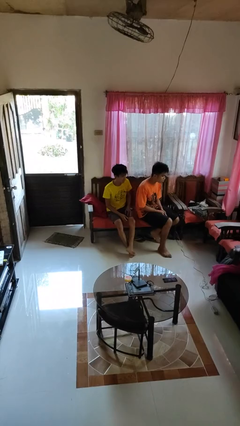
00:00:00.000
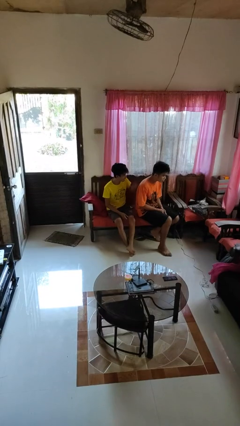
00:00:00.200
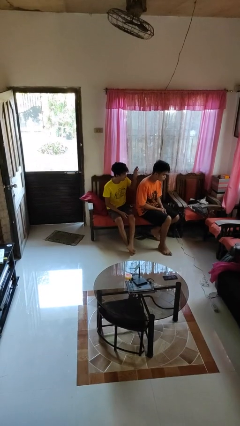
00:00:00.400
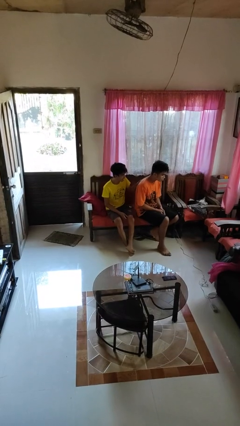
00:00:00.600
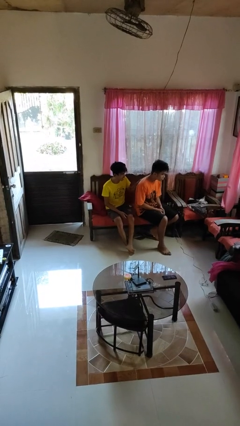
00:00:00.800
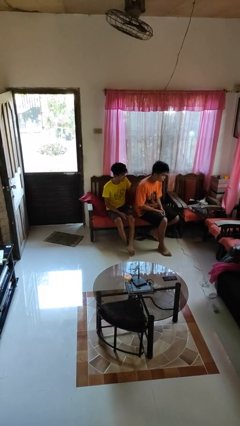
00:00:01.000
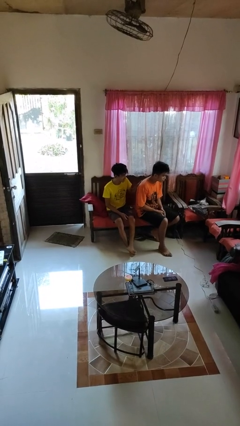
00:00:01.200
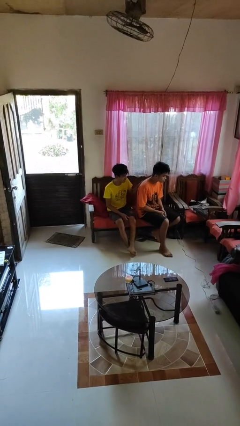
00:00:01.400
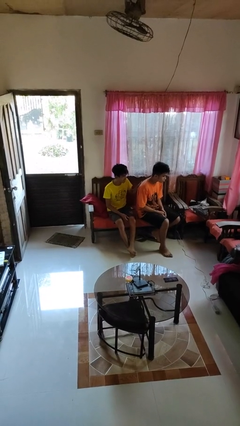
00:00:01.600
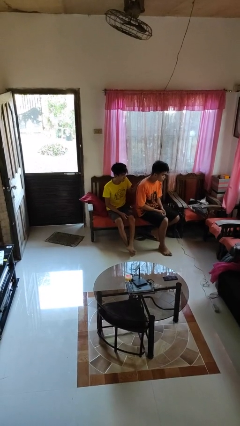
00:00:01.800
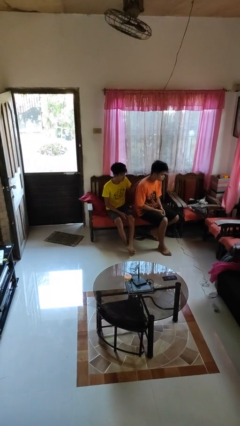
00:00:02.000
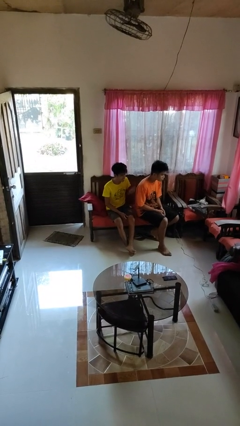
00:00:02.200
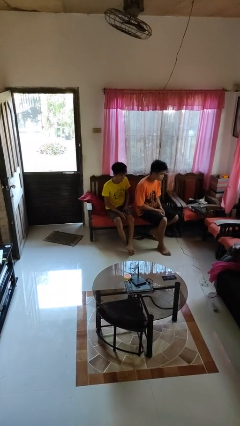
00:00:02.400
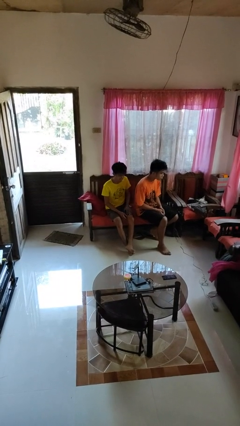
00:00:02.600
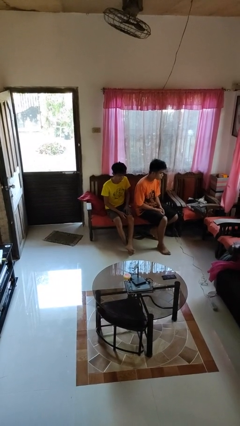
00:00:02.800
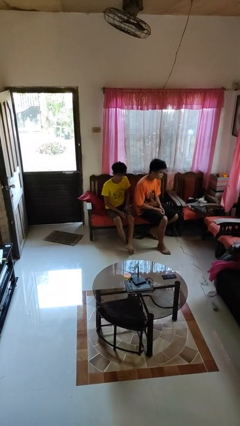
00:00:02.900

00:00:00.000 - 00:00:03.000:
person touches back of person

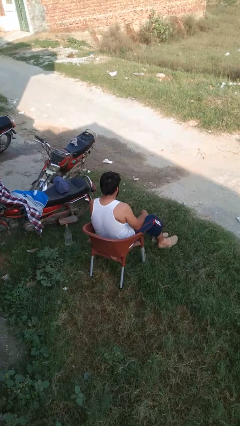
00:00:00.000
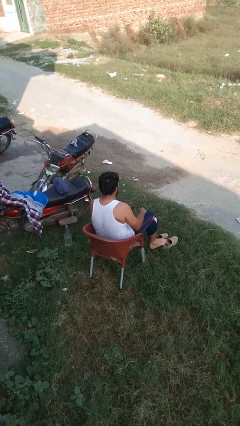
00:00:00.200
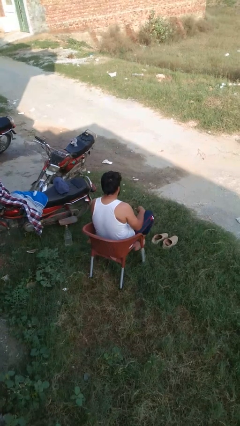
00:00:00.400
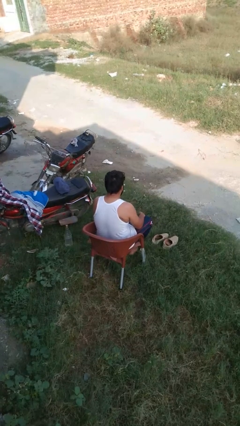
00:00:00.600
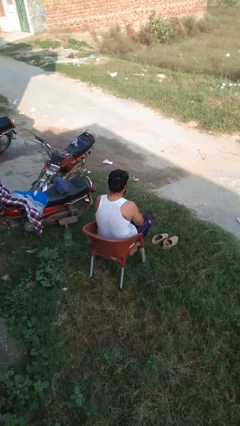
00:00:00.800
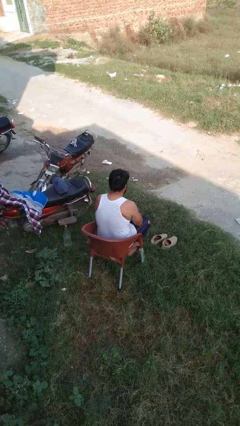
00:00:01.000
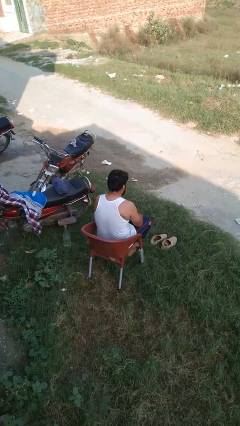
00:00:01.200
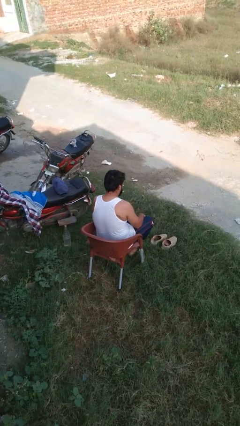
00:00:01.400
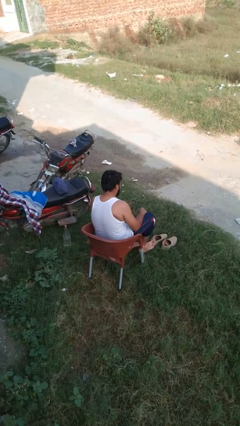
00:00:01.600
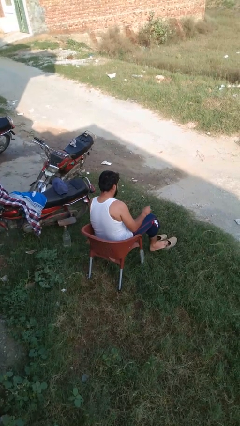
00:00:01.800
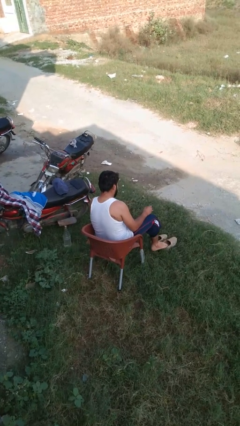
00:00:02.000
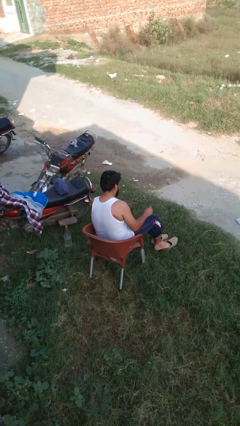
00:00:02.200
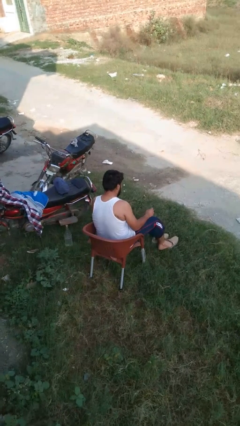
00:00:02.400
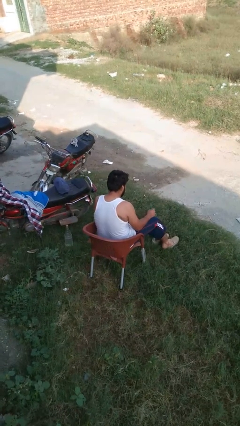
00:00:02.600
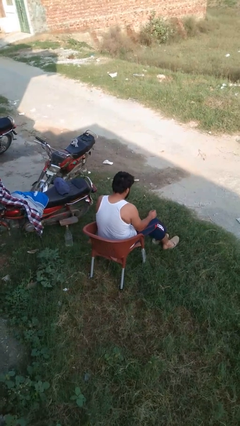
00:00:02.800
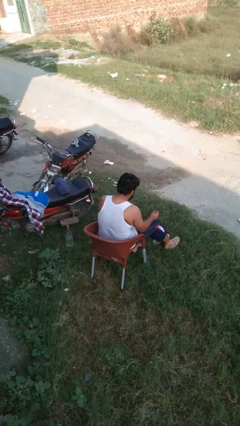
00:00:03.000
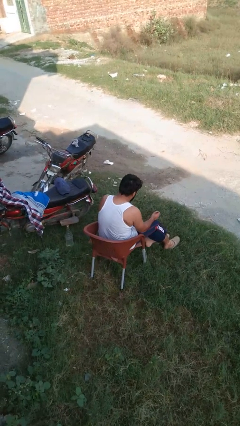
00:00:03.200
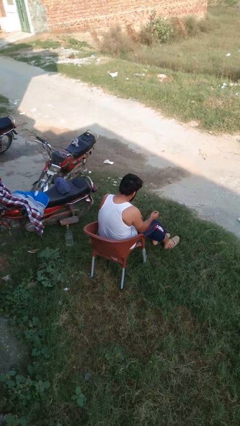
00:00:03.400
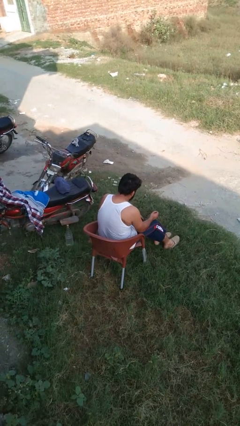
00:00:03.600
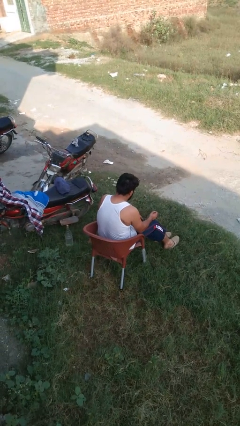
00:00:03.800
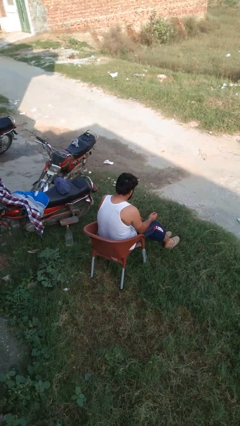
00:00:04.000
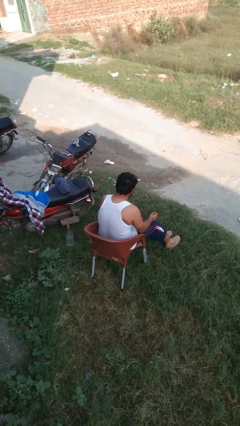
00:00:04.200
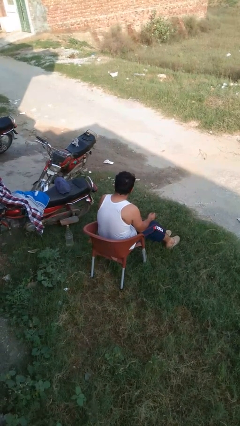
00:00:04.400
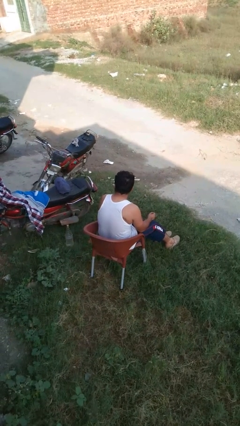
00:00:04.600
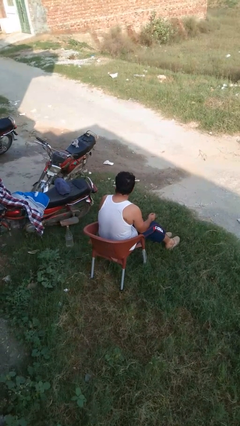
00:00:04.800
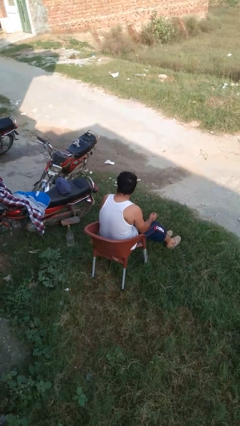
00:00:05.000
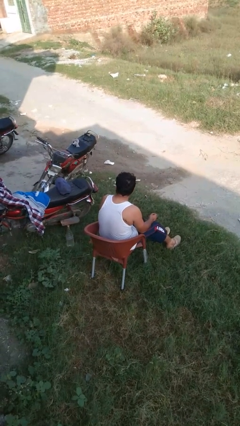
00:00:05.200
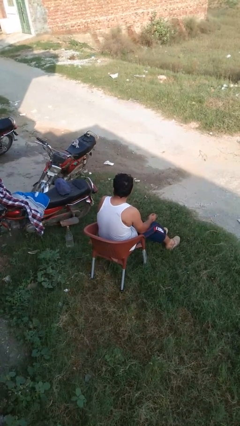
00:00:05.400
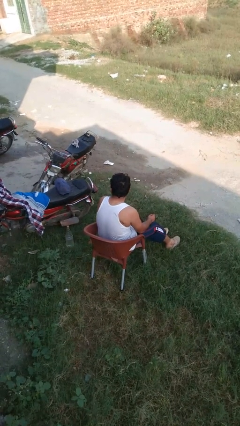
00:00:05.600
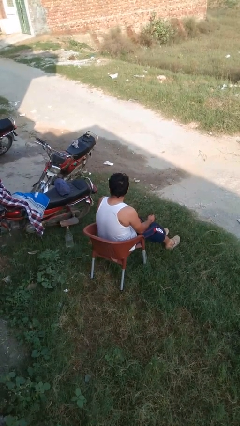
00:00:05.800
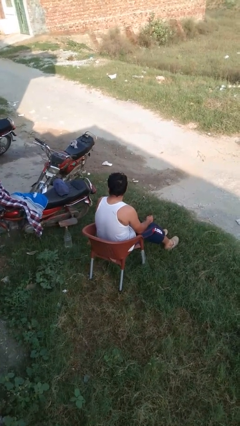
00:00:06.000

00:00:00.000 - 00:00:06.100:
person puts on shoes

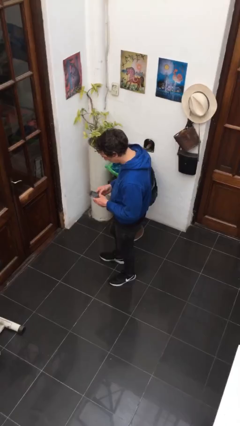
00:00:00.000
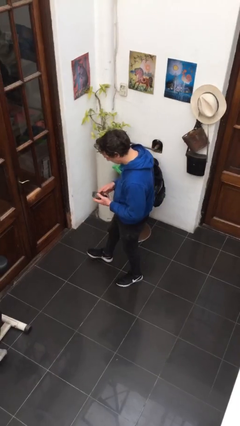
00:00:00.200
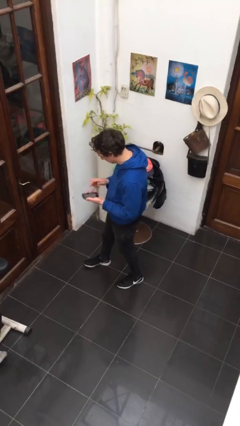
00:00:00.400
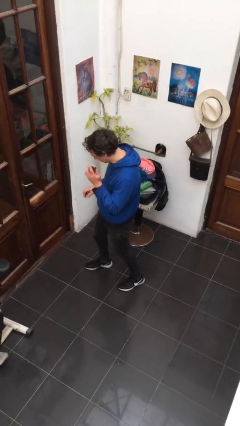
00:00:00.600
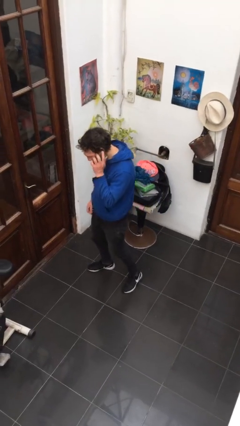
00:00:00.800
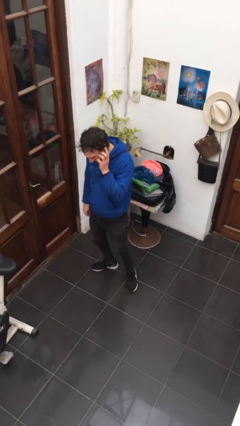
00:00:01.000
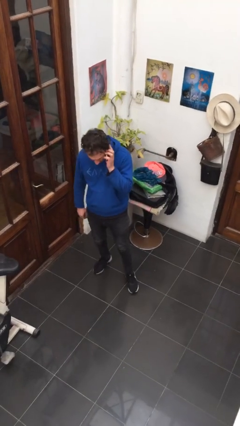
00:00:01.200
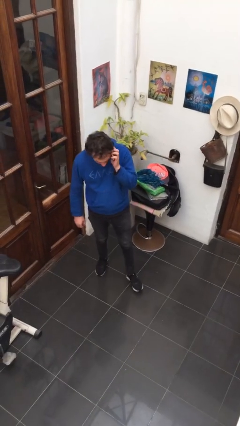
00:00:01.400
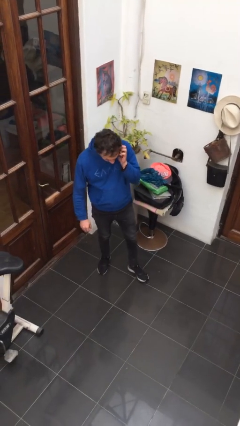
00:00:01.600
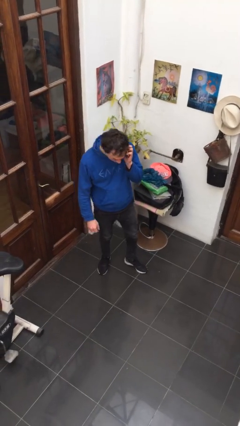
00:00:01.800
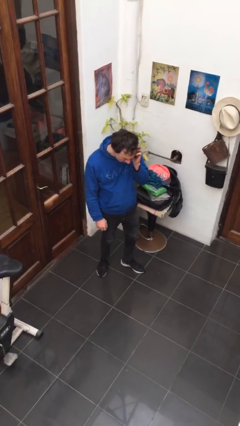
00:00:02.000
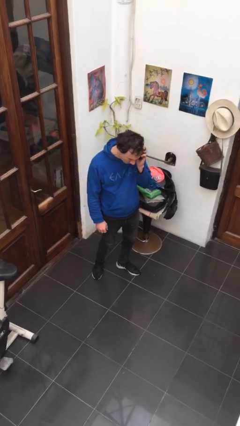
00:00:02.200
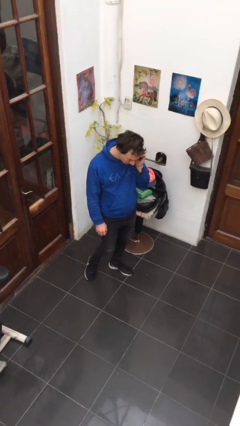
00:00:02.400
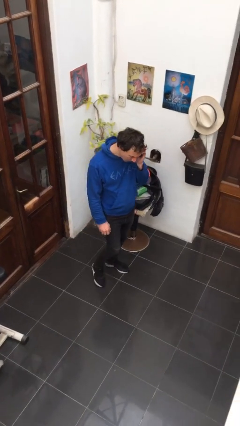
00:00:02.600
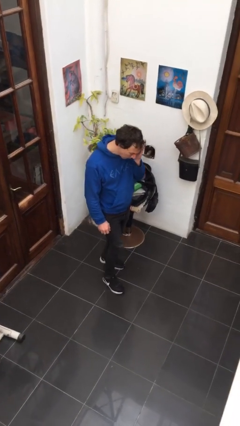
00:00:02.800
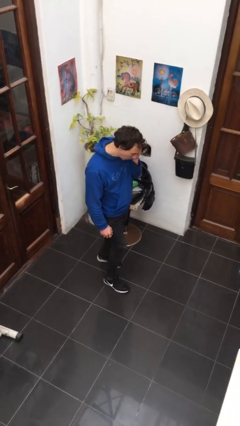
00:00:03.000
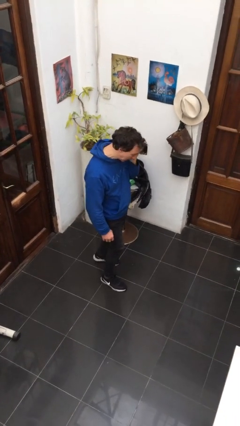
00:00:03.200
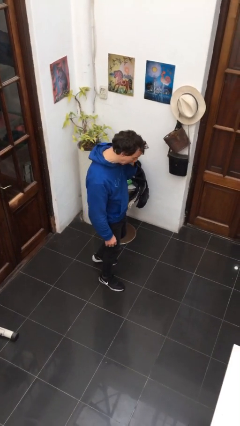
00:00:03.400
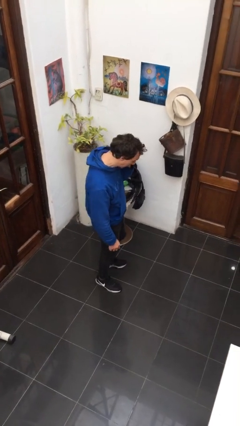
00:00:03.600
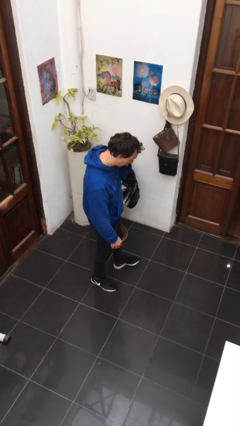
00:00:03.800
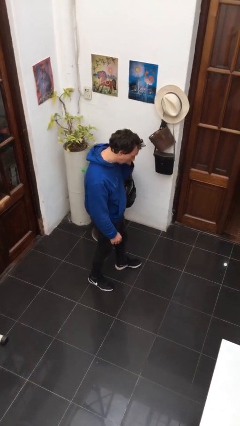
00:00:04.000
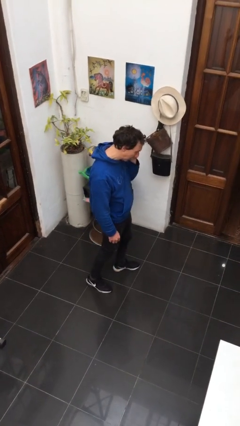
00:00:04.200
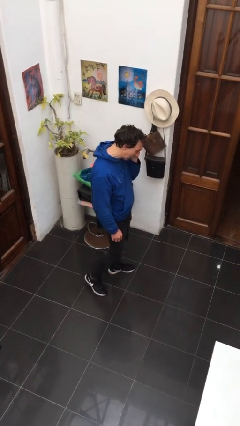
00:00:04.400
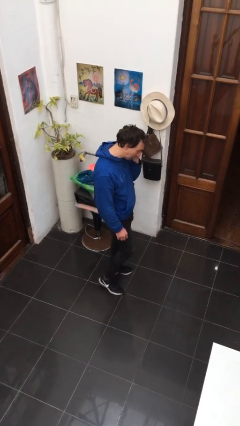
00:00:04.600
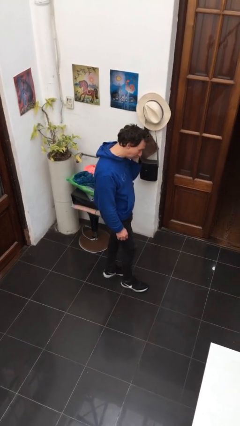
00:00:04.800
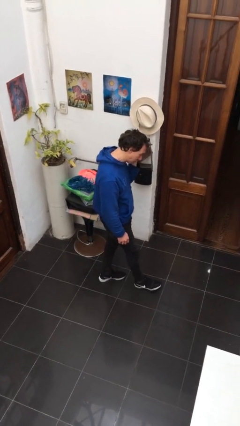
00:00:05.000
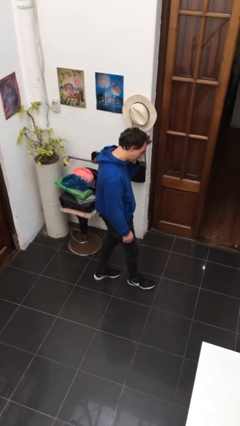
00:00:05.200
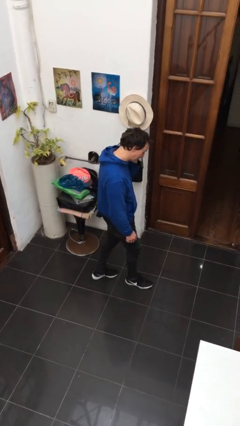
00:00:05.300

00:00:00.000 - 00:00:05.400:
person talks on phone

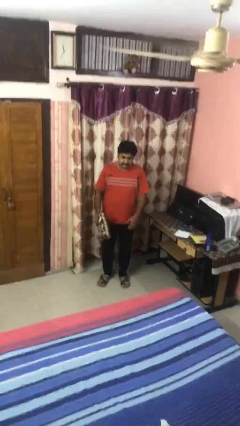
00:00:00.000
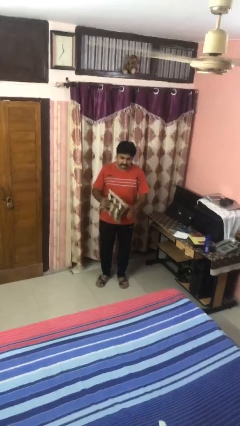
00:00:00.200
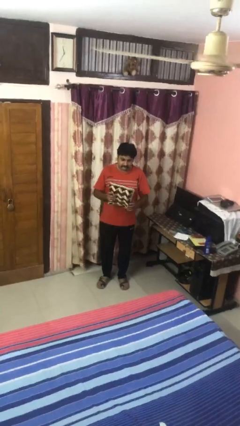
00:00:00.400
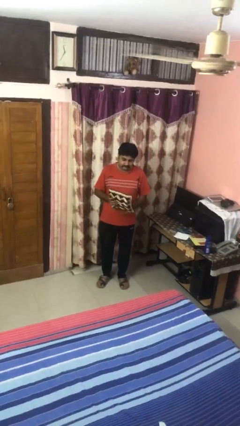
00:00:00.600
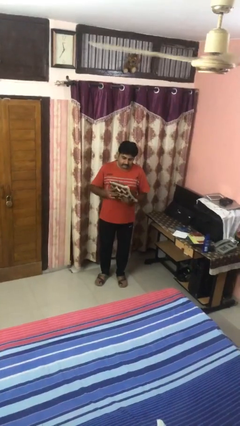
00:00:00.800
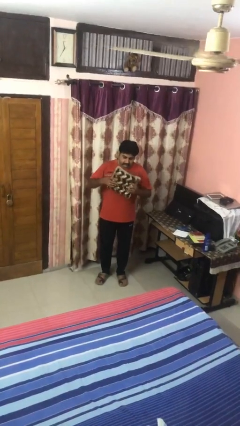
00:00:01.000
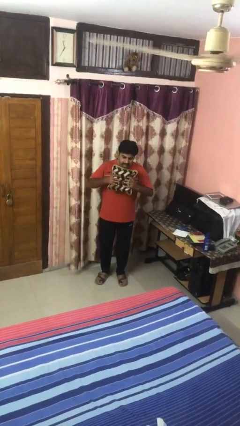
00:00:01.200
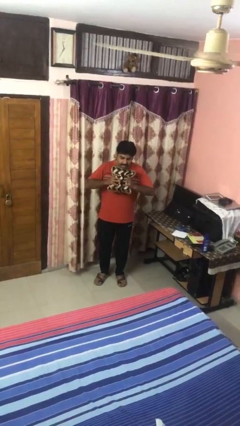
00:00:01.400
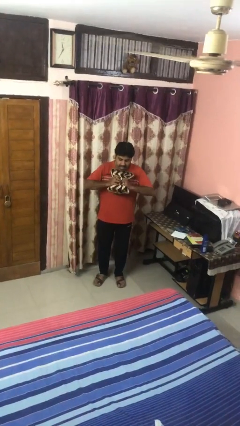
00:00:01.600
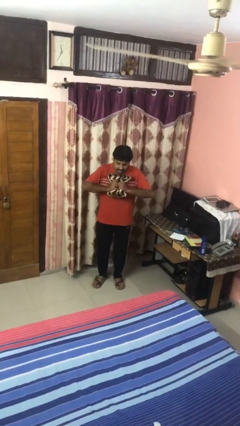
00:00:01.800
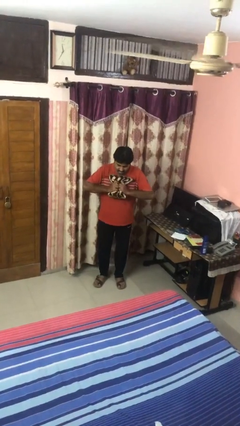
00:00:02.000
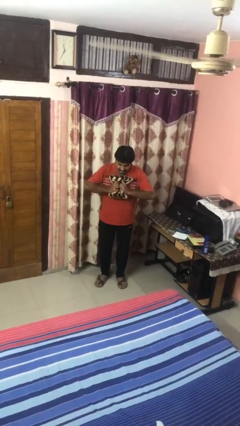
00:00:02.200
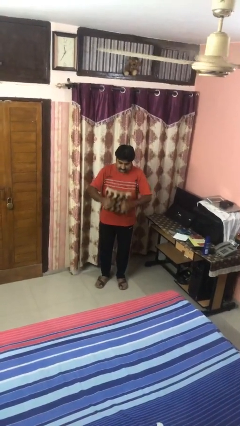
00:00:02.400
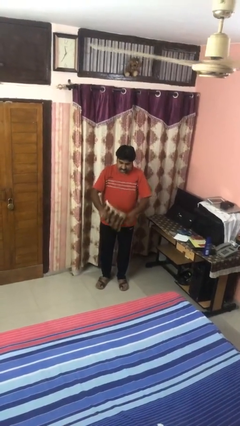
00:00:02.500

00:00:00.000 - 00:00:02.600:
person squeezes object

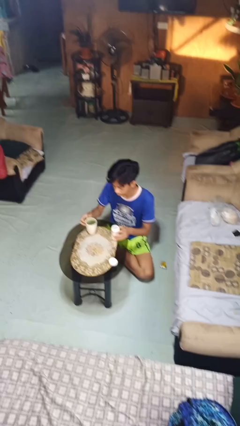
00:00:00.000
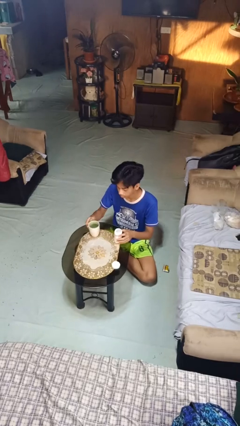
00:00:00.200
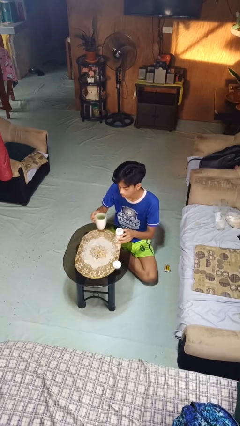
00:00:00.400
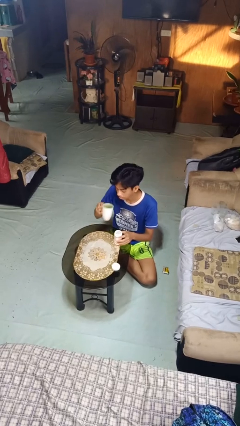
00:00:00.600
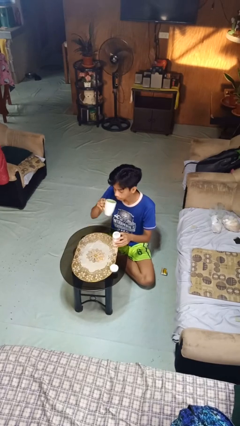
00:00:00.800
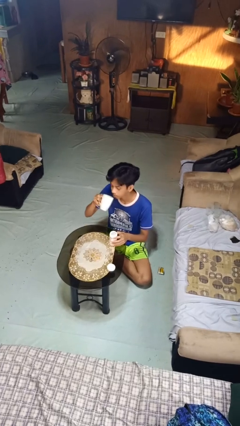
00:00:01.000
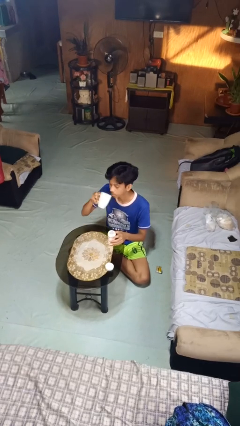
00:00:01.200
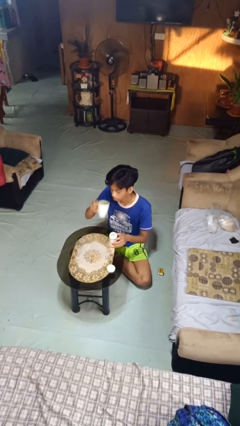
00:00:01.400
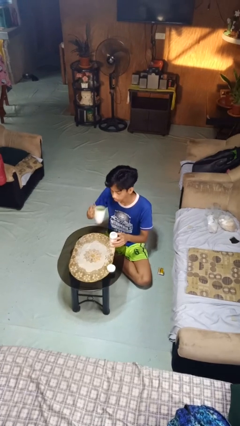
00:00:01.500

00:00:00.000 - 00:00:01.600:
person drinks from cup
